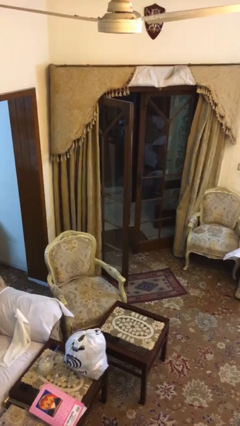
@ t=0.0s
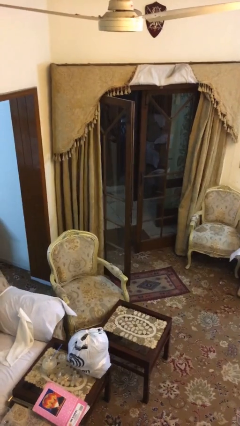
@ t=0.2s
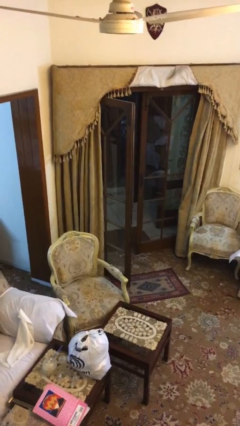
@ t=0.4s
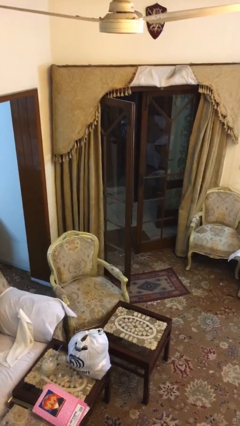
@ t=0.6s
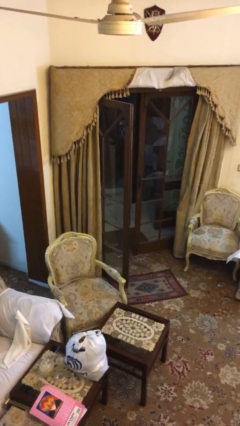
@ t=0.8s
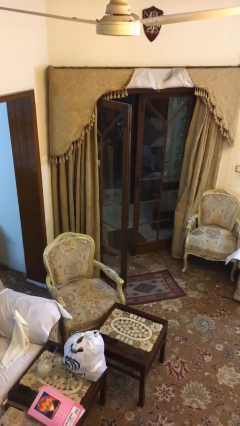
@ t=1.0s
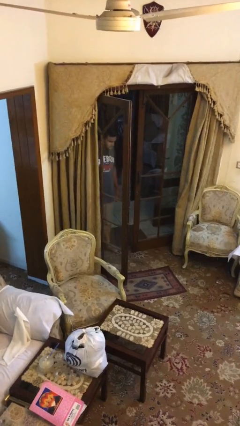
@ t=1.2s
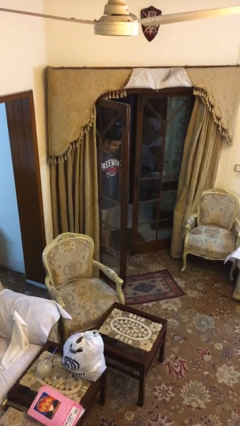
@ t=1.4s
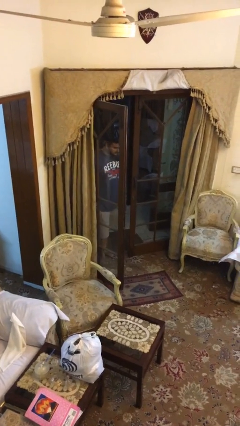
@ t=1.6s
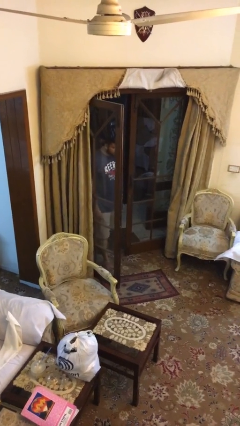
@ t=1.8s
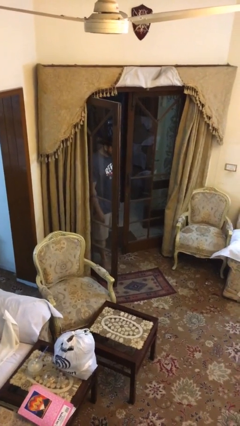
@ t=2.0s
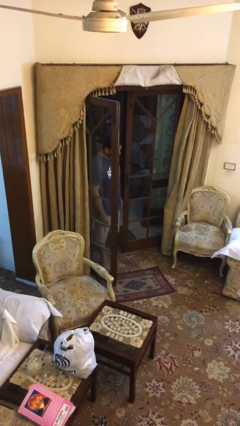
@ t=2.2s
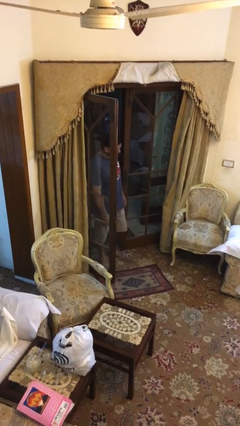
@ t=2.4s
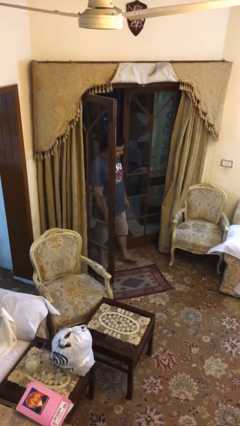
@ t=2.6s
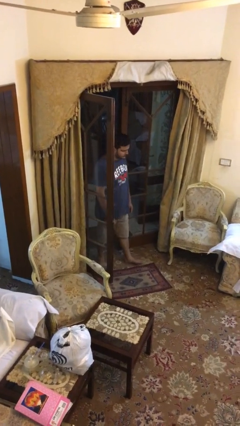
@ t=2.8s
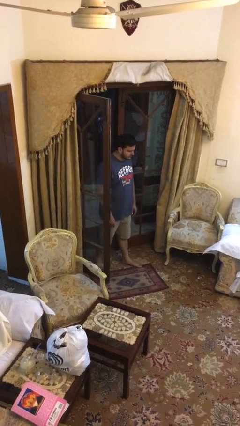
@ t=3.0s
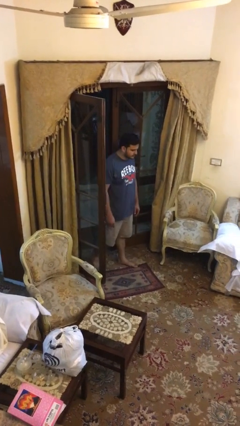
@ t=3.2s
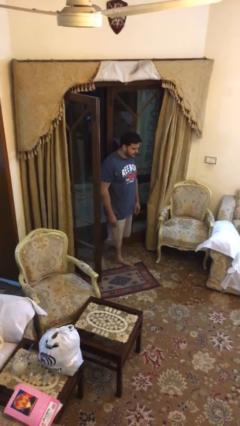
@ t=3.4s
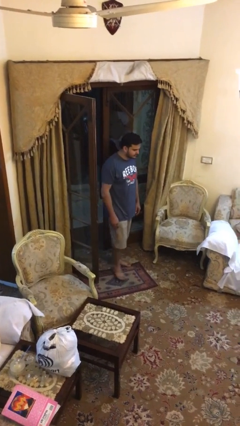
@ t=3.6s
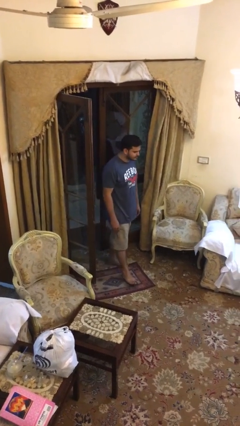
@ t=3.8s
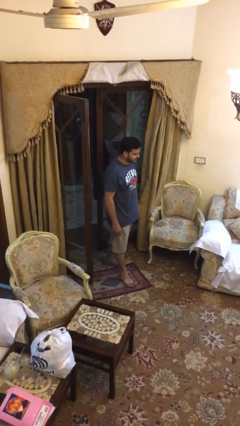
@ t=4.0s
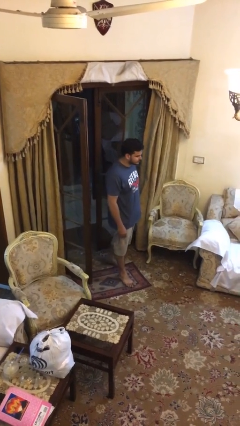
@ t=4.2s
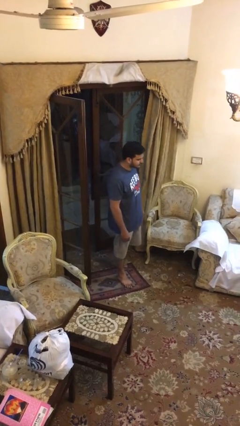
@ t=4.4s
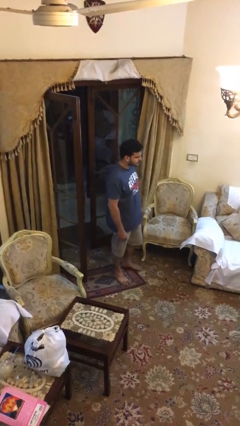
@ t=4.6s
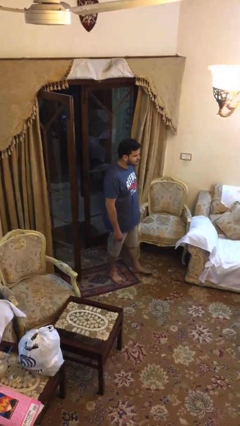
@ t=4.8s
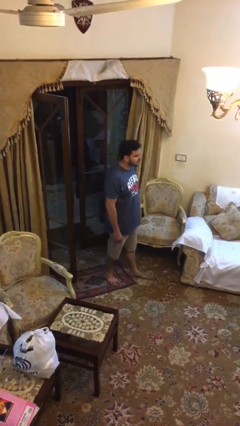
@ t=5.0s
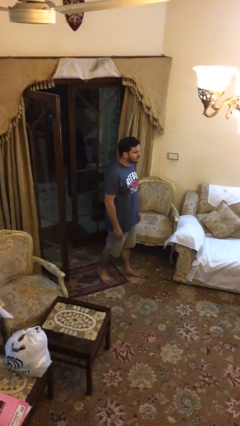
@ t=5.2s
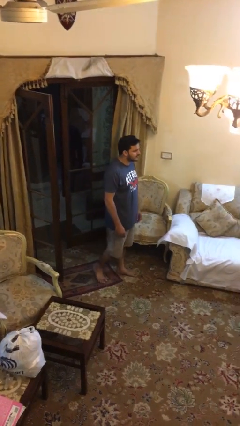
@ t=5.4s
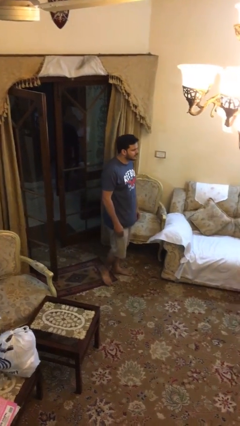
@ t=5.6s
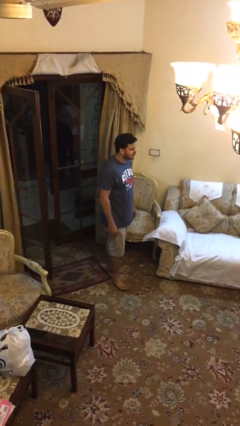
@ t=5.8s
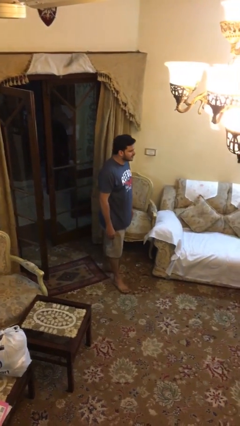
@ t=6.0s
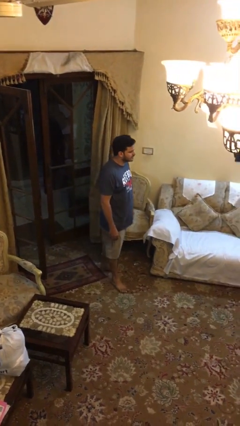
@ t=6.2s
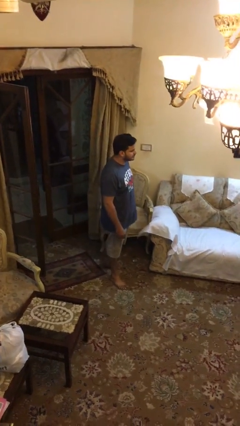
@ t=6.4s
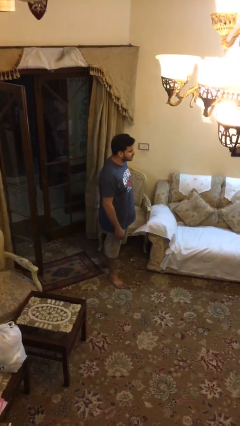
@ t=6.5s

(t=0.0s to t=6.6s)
person enters scene through structure

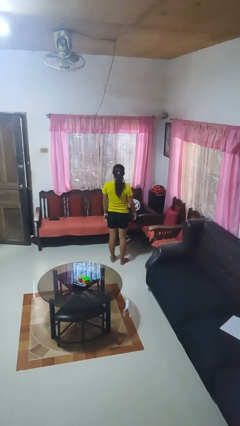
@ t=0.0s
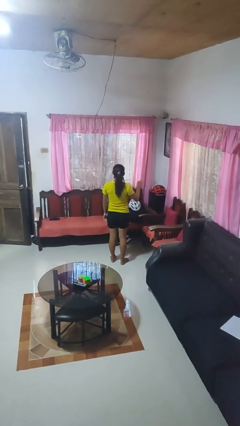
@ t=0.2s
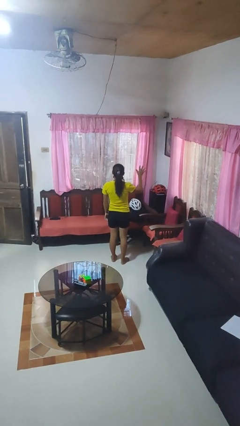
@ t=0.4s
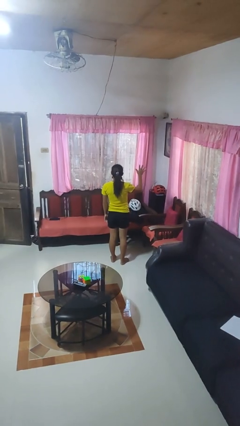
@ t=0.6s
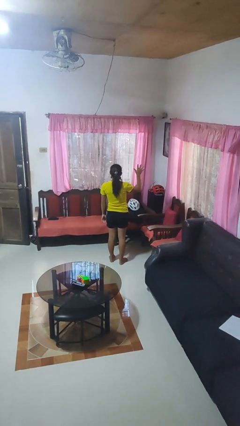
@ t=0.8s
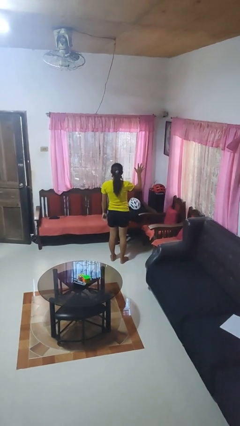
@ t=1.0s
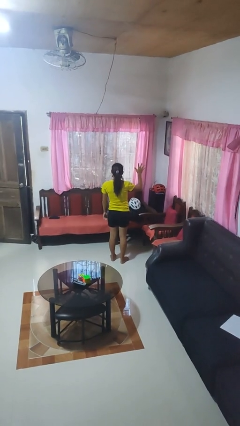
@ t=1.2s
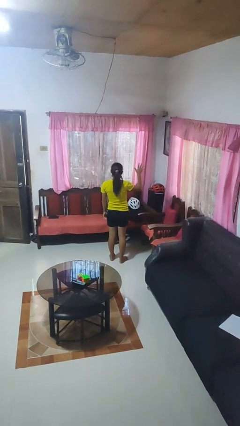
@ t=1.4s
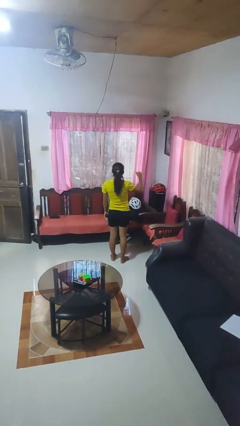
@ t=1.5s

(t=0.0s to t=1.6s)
person gestures number five

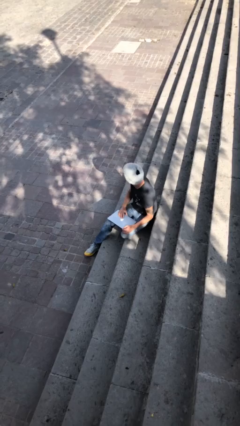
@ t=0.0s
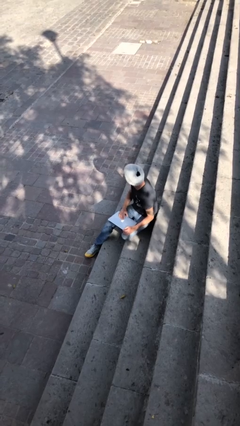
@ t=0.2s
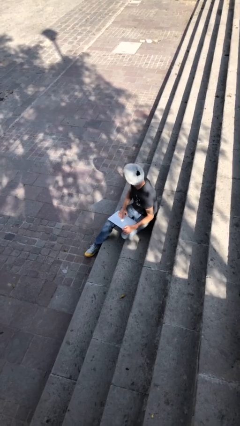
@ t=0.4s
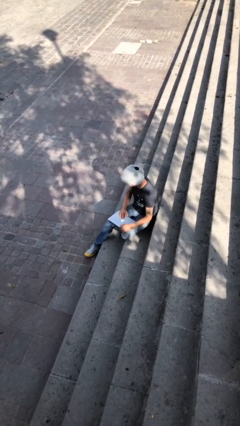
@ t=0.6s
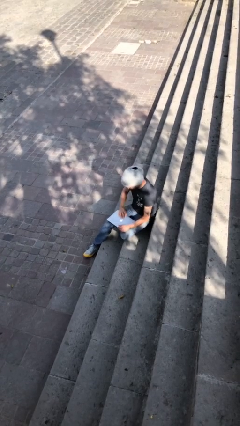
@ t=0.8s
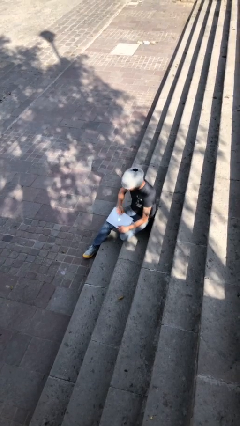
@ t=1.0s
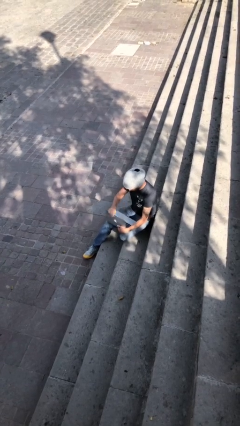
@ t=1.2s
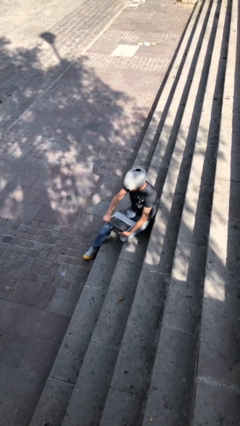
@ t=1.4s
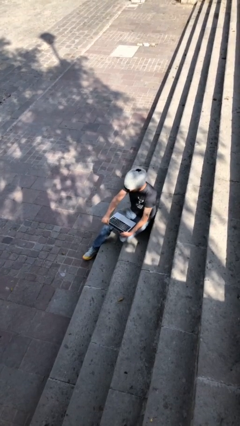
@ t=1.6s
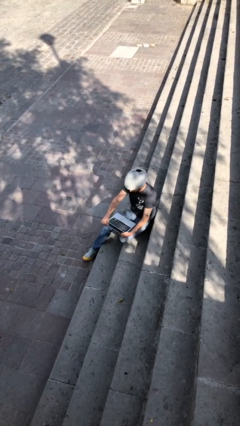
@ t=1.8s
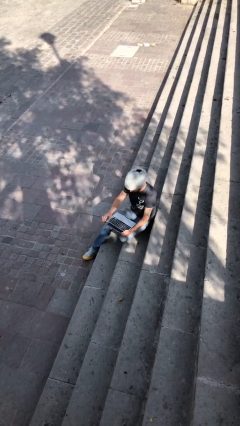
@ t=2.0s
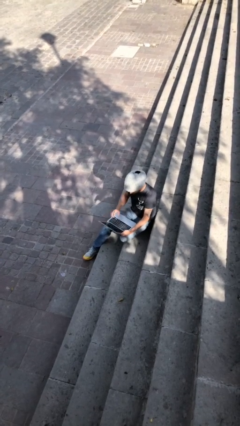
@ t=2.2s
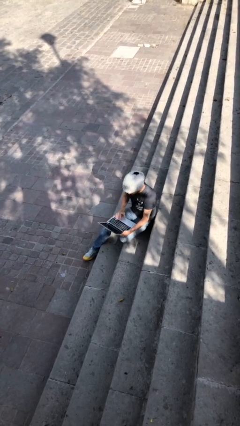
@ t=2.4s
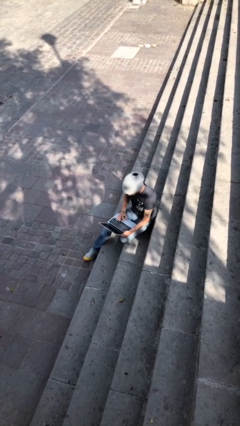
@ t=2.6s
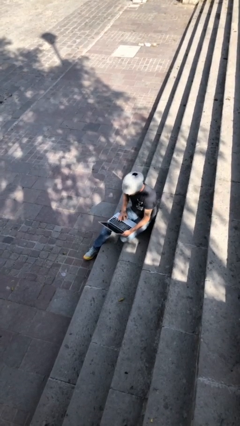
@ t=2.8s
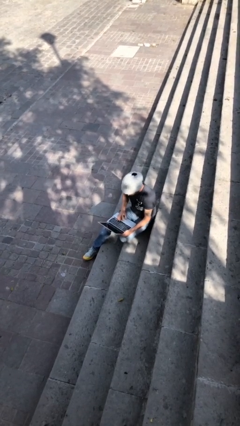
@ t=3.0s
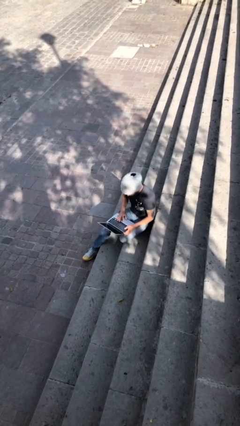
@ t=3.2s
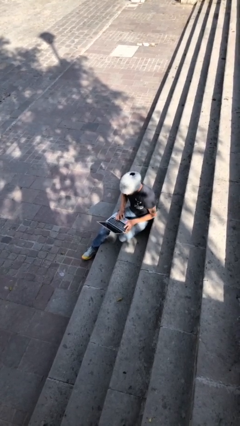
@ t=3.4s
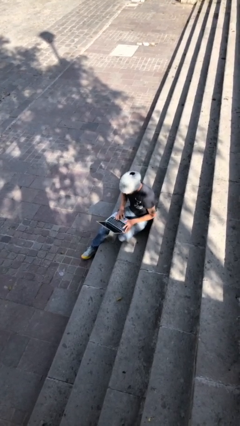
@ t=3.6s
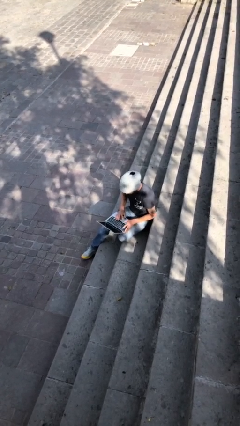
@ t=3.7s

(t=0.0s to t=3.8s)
person interacts with laptop

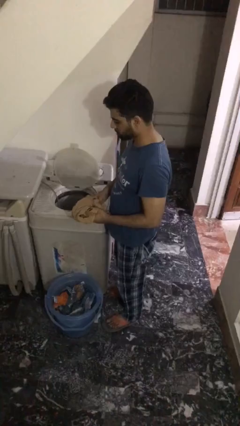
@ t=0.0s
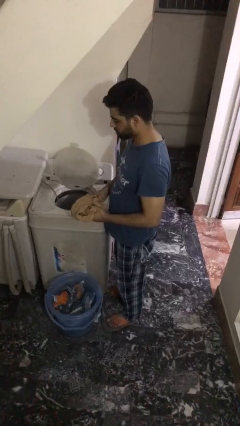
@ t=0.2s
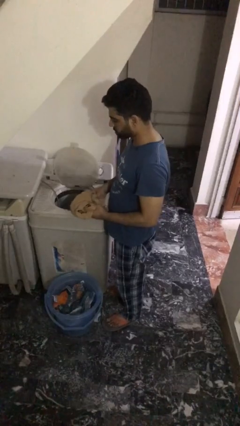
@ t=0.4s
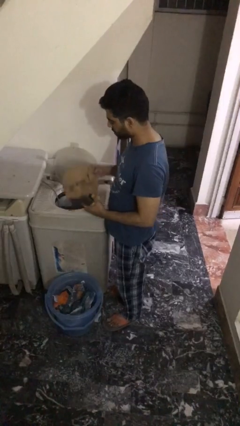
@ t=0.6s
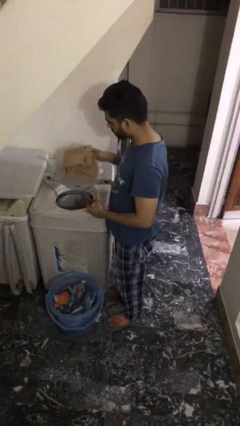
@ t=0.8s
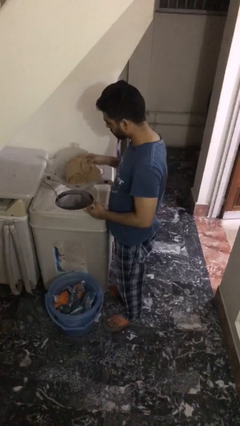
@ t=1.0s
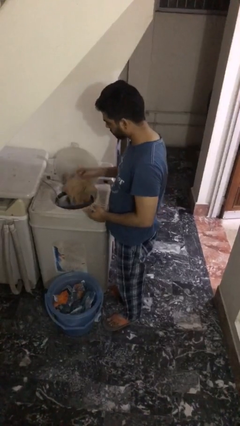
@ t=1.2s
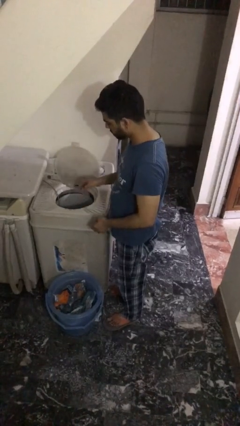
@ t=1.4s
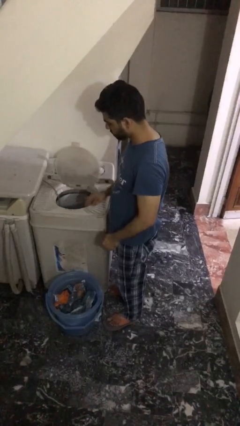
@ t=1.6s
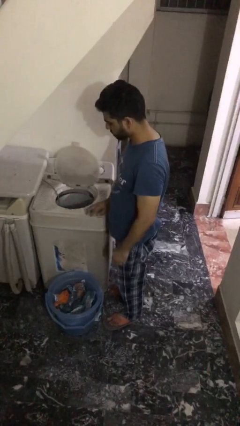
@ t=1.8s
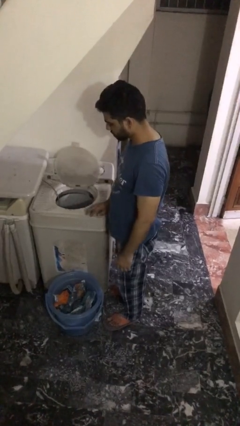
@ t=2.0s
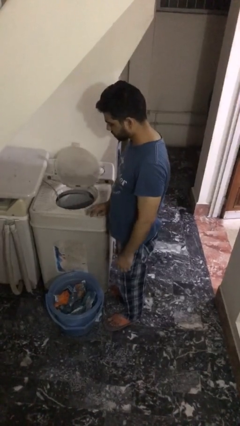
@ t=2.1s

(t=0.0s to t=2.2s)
person loads clotheswasher

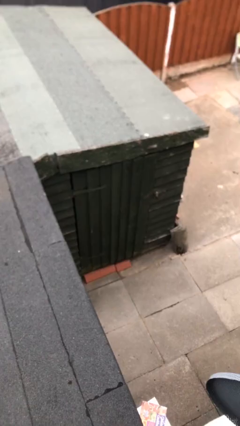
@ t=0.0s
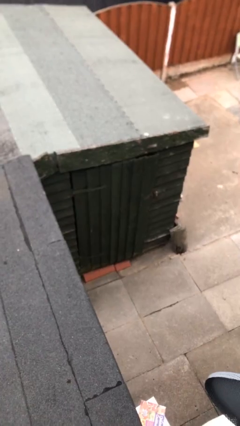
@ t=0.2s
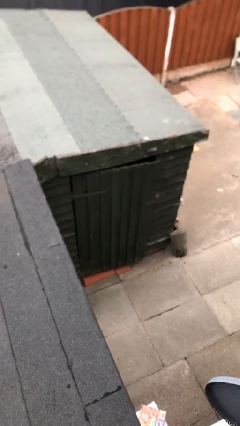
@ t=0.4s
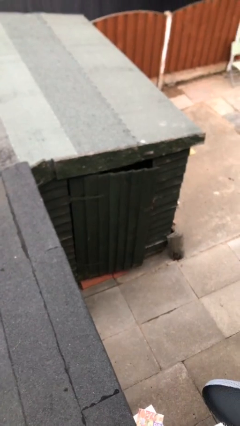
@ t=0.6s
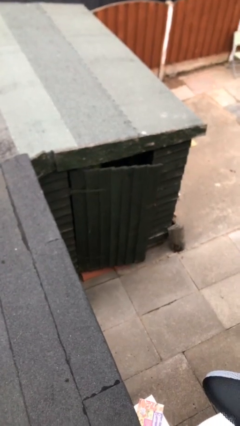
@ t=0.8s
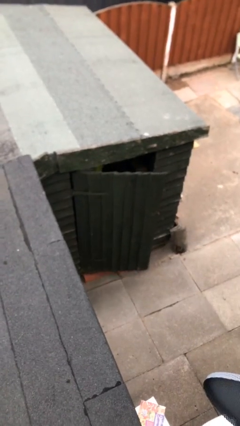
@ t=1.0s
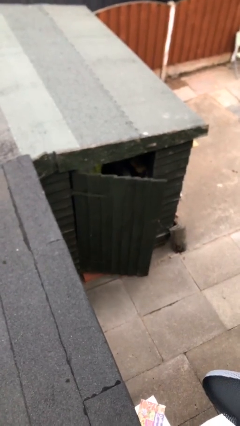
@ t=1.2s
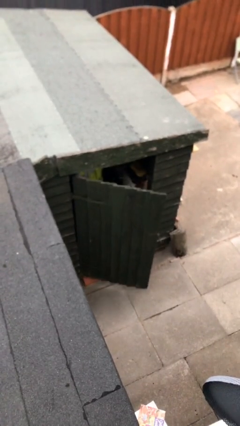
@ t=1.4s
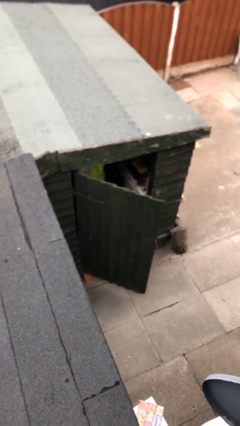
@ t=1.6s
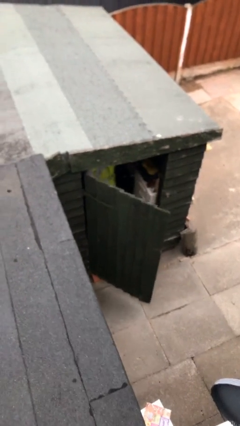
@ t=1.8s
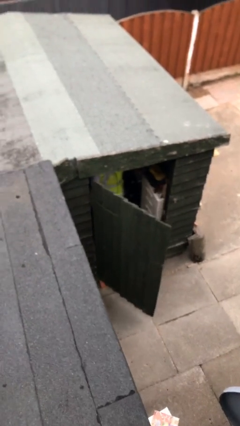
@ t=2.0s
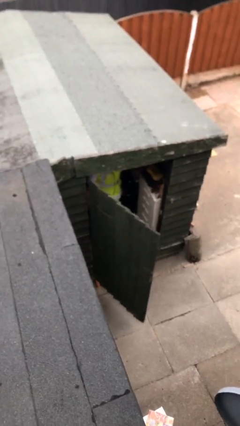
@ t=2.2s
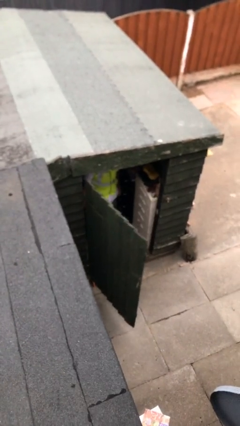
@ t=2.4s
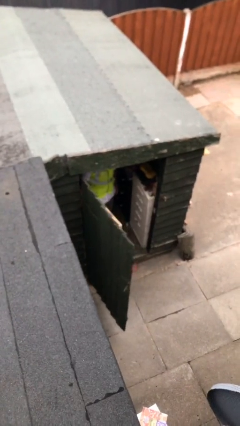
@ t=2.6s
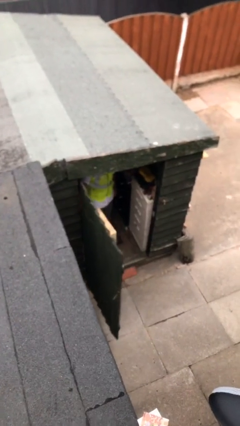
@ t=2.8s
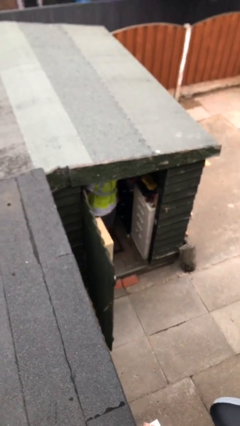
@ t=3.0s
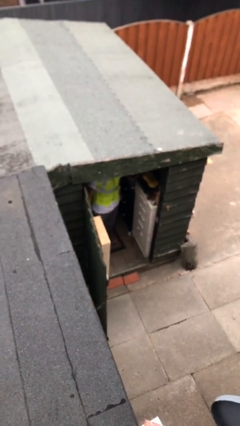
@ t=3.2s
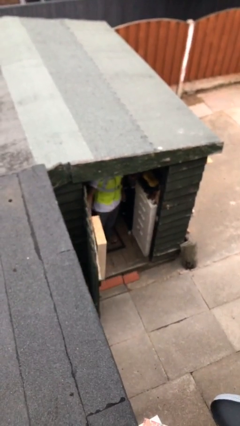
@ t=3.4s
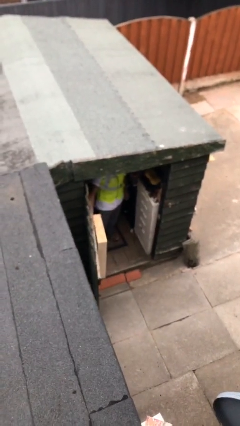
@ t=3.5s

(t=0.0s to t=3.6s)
person opens facility door
